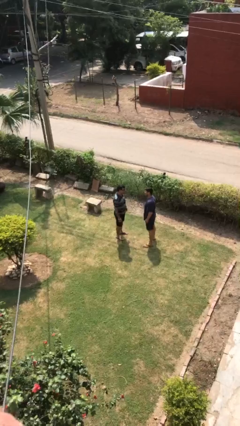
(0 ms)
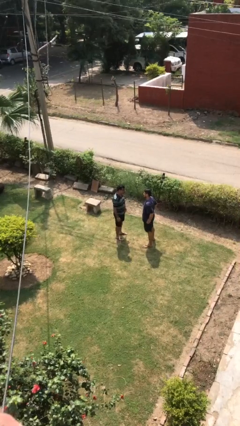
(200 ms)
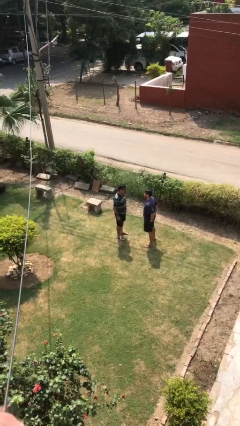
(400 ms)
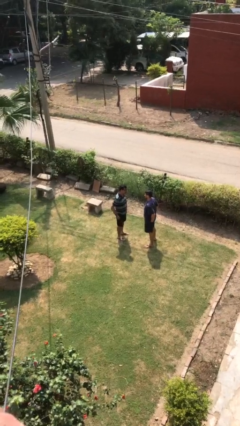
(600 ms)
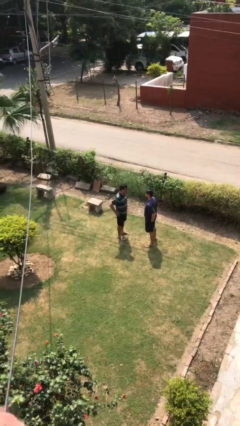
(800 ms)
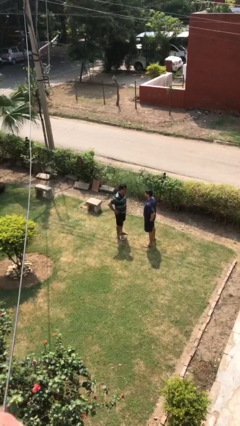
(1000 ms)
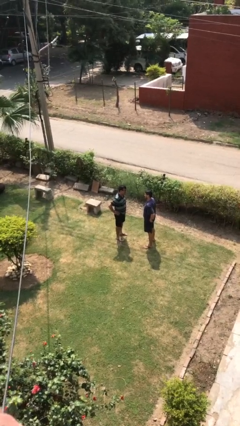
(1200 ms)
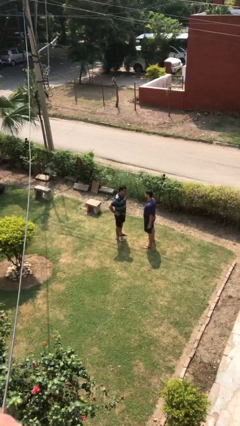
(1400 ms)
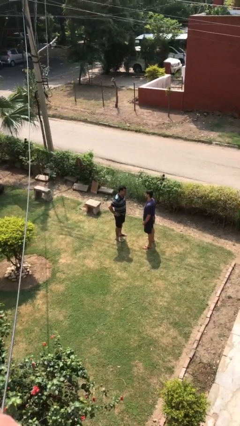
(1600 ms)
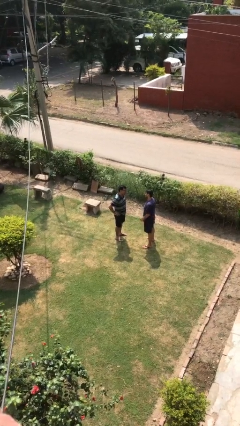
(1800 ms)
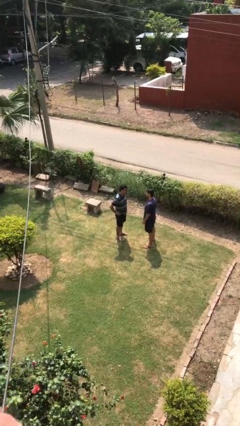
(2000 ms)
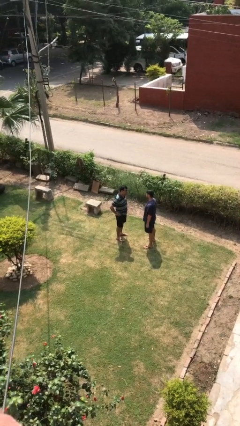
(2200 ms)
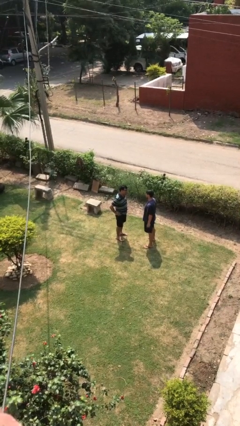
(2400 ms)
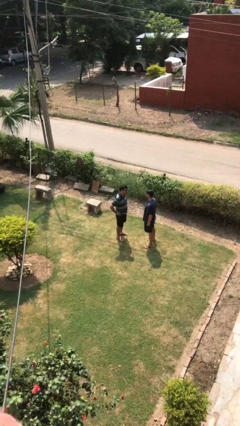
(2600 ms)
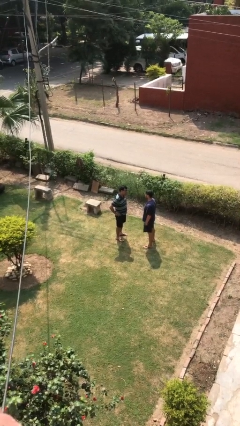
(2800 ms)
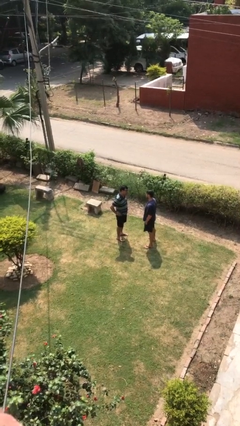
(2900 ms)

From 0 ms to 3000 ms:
person talks to person

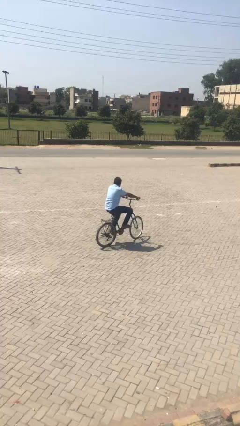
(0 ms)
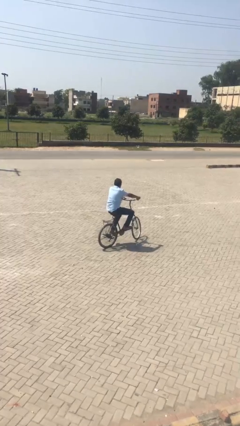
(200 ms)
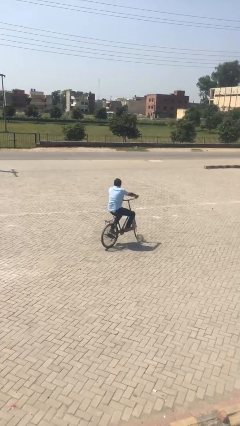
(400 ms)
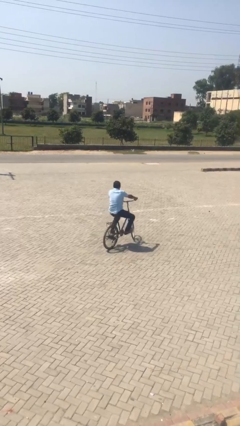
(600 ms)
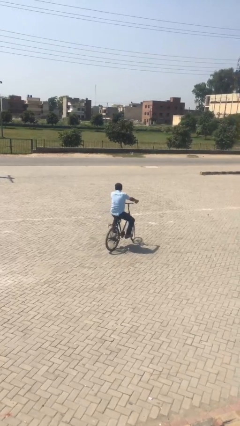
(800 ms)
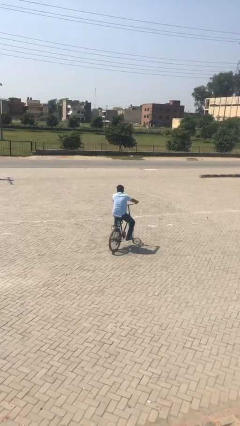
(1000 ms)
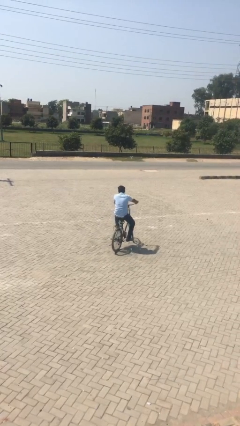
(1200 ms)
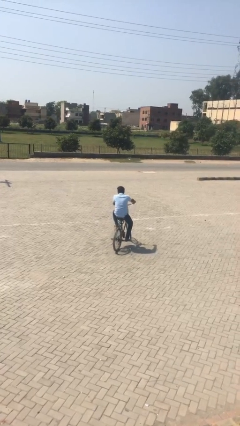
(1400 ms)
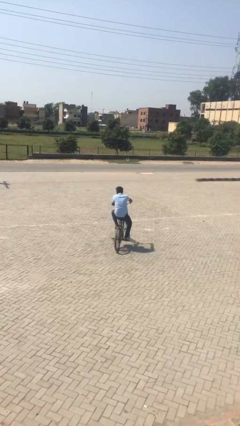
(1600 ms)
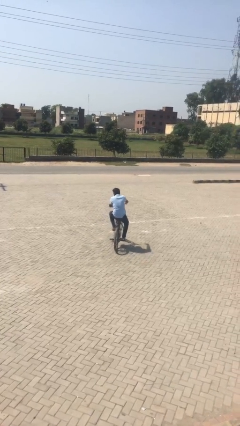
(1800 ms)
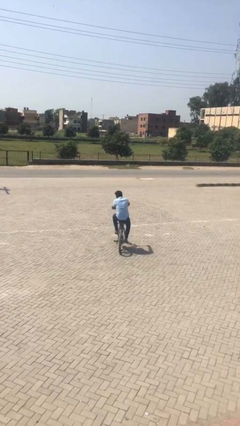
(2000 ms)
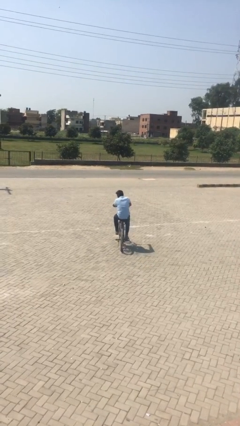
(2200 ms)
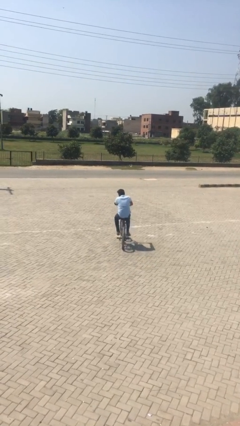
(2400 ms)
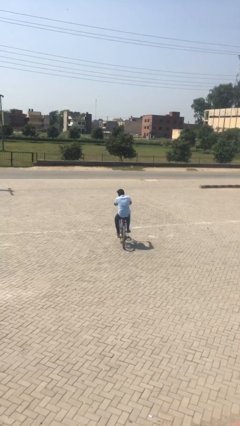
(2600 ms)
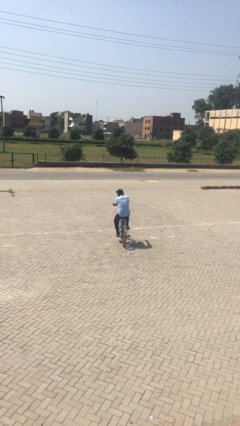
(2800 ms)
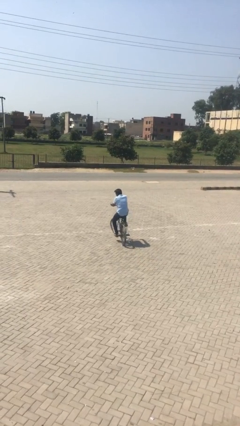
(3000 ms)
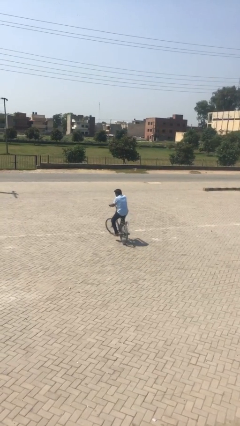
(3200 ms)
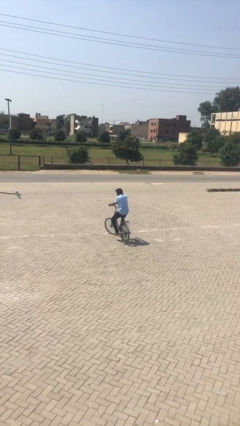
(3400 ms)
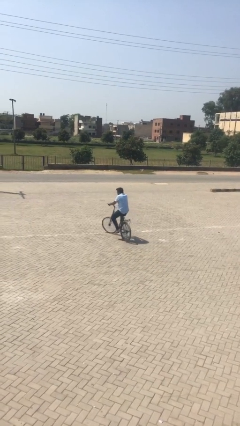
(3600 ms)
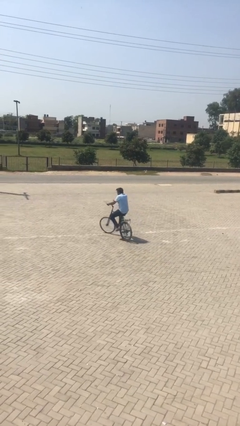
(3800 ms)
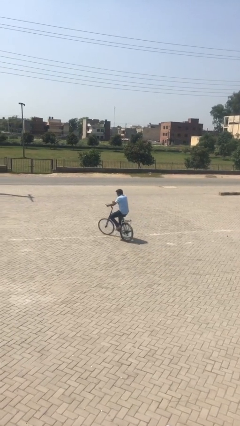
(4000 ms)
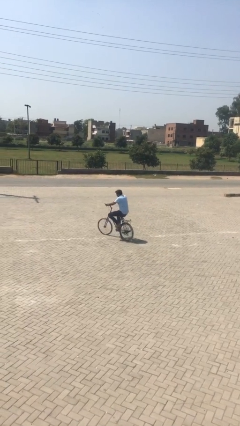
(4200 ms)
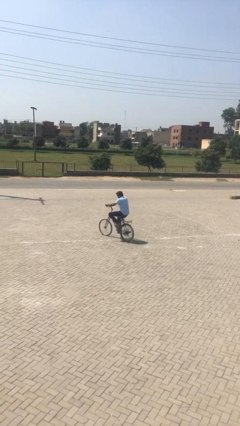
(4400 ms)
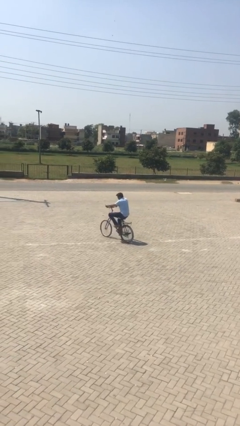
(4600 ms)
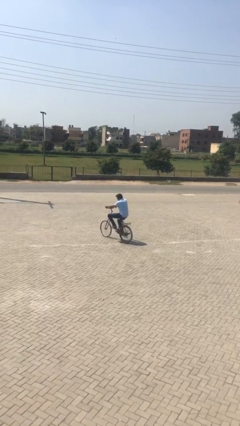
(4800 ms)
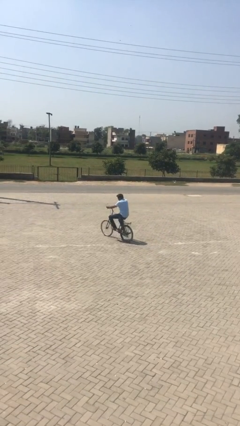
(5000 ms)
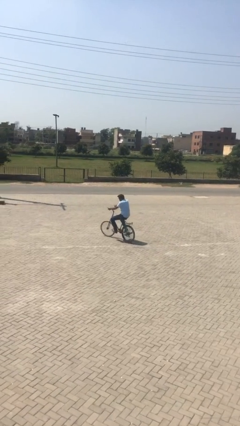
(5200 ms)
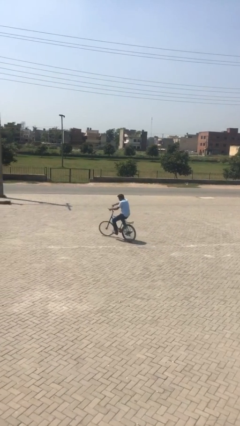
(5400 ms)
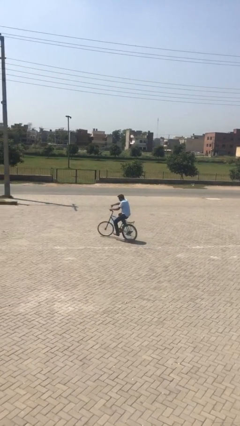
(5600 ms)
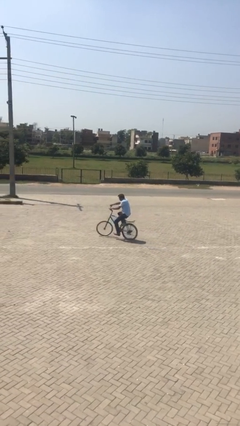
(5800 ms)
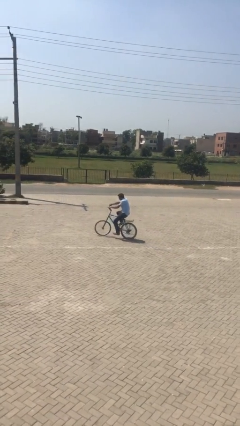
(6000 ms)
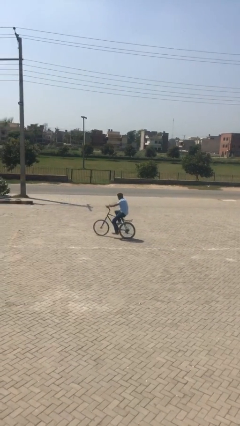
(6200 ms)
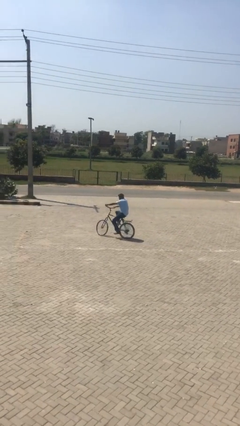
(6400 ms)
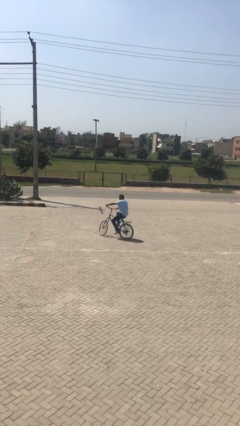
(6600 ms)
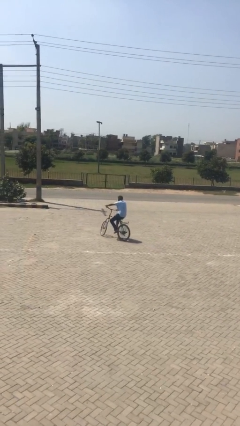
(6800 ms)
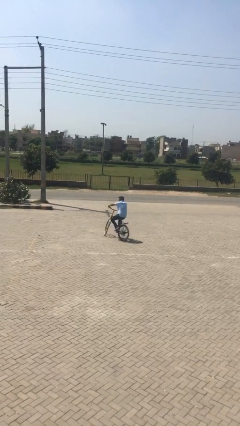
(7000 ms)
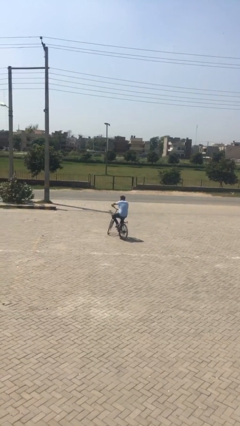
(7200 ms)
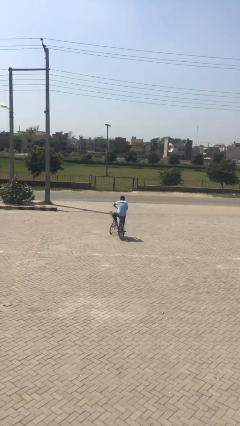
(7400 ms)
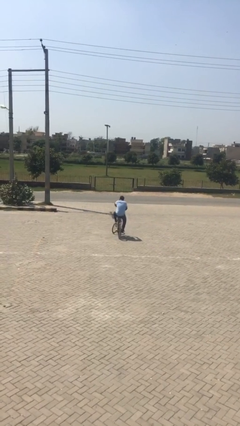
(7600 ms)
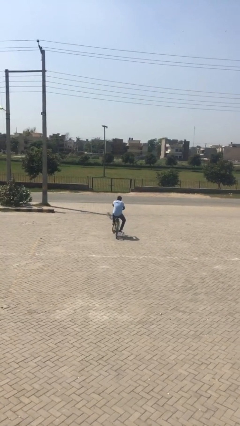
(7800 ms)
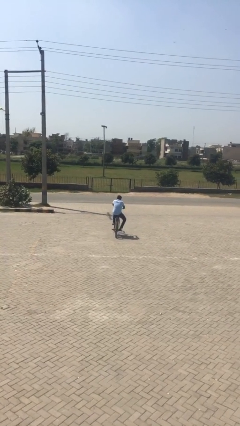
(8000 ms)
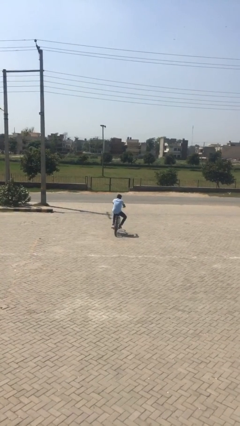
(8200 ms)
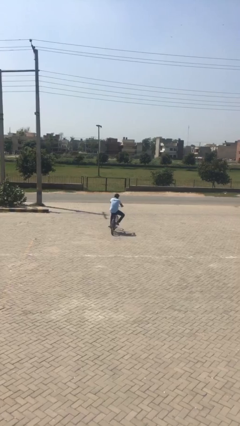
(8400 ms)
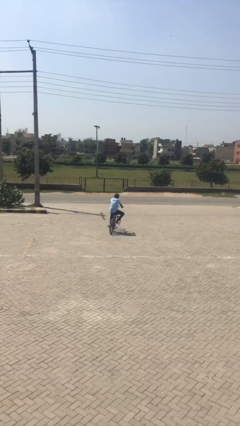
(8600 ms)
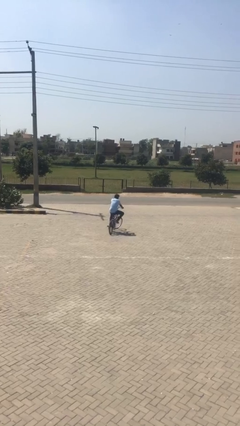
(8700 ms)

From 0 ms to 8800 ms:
person rides bicycle

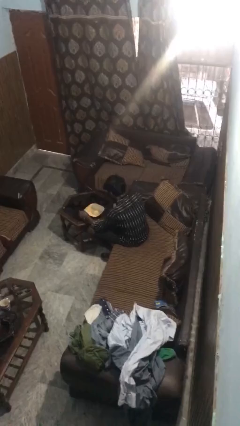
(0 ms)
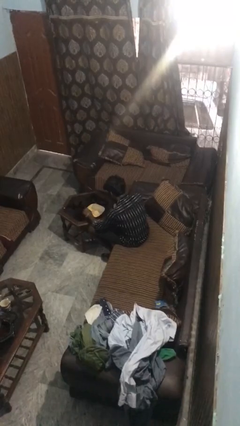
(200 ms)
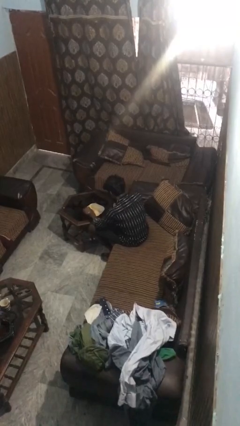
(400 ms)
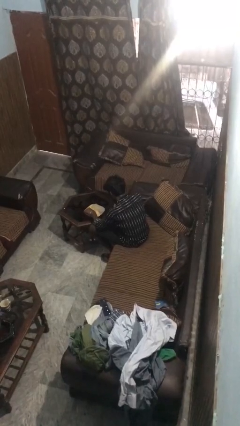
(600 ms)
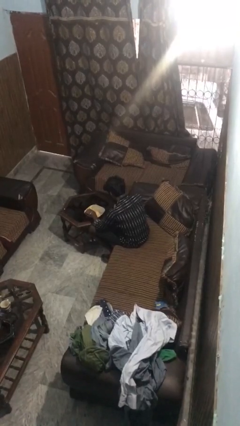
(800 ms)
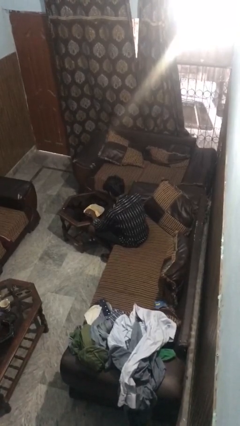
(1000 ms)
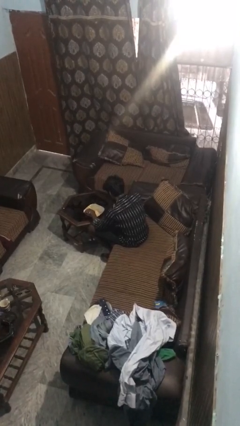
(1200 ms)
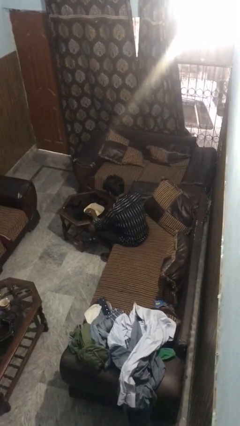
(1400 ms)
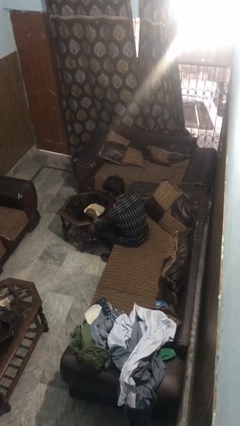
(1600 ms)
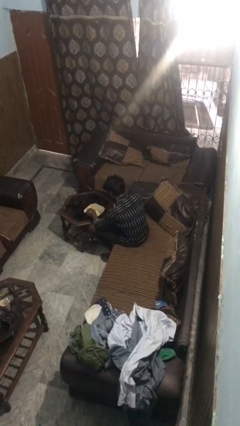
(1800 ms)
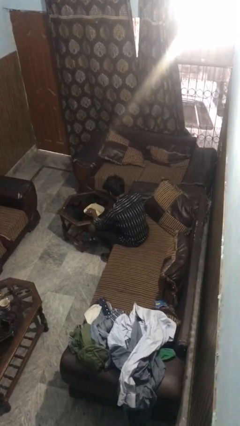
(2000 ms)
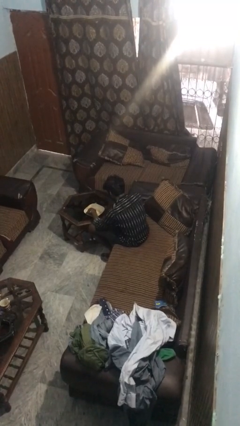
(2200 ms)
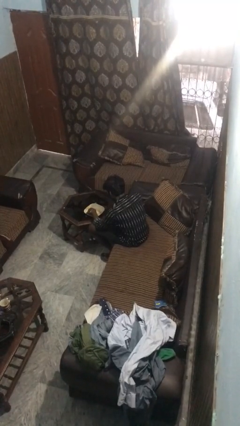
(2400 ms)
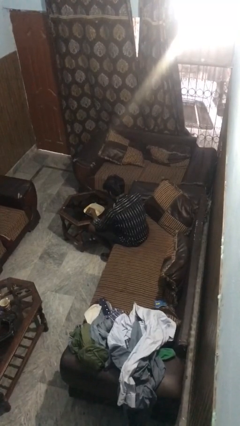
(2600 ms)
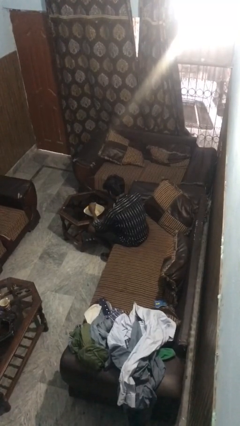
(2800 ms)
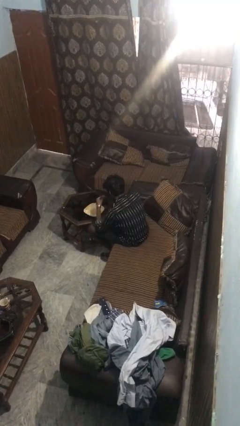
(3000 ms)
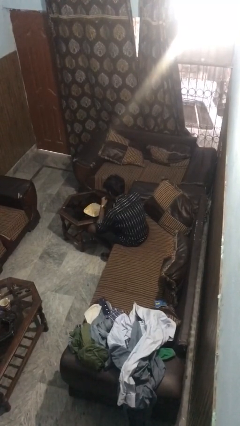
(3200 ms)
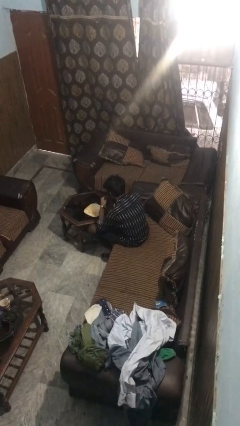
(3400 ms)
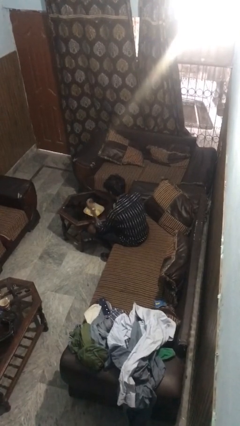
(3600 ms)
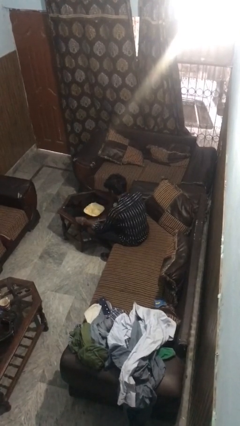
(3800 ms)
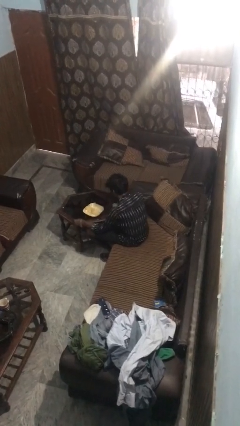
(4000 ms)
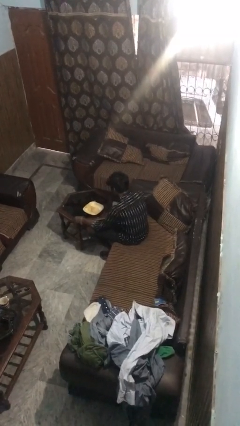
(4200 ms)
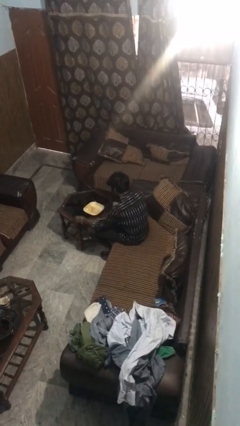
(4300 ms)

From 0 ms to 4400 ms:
person eats with hands

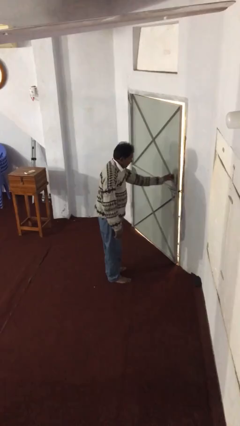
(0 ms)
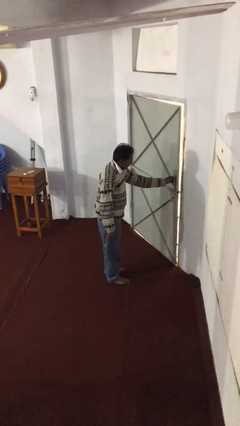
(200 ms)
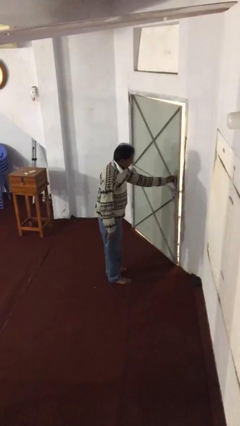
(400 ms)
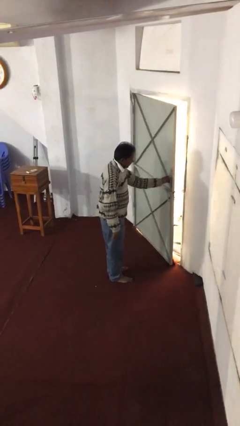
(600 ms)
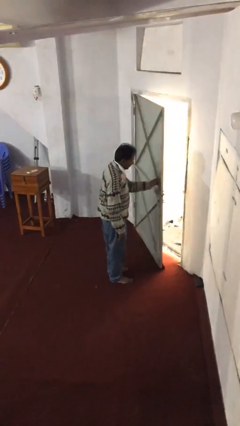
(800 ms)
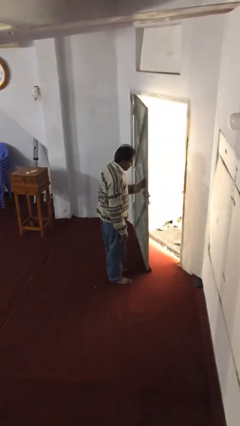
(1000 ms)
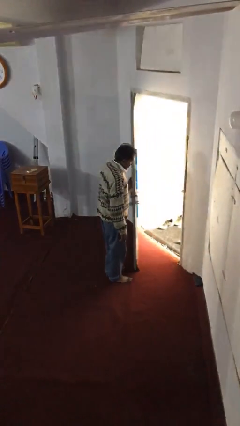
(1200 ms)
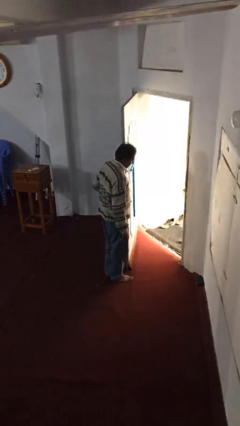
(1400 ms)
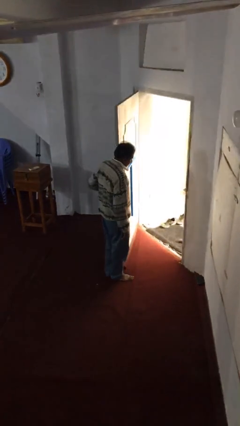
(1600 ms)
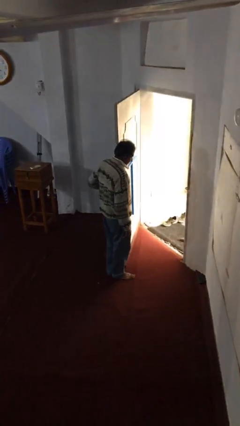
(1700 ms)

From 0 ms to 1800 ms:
person opens facility door
